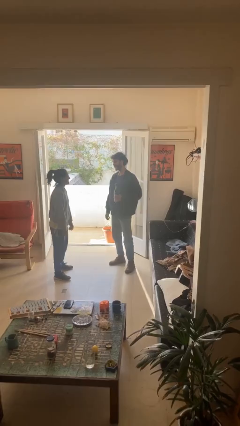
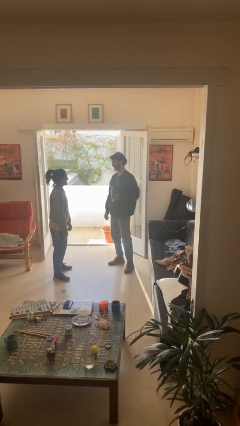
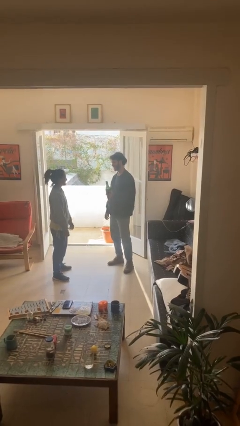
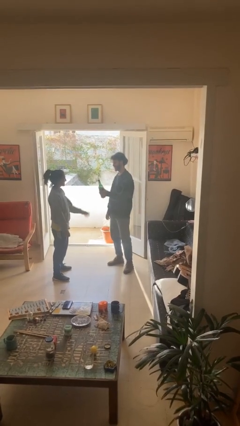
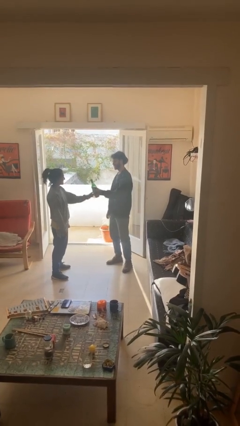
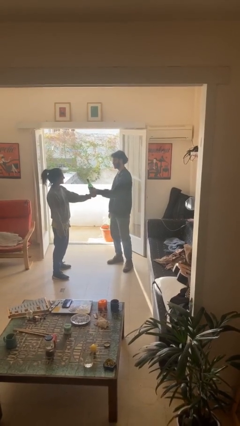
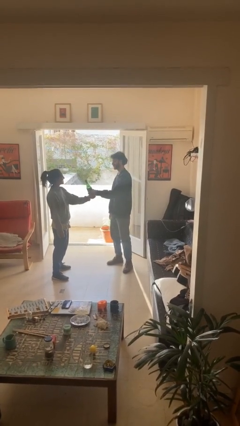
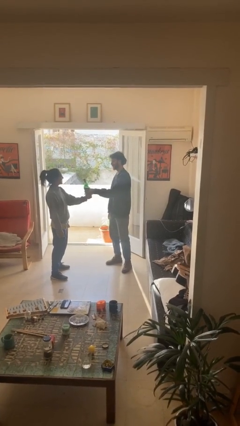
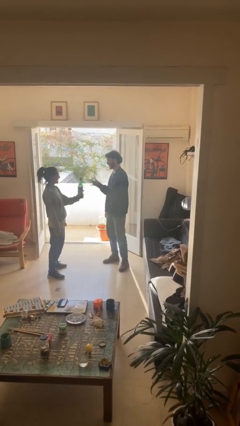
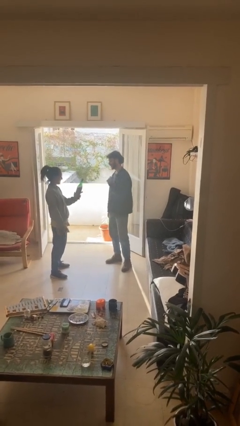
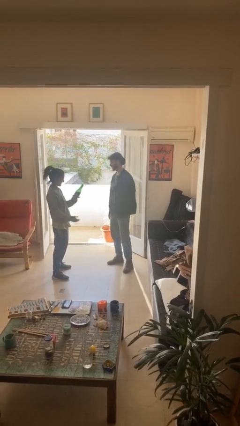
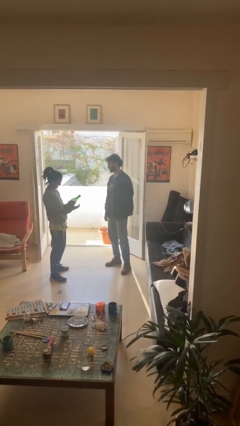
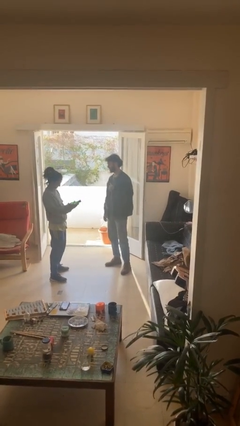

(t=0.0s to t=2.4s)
person transfers object to person

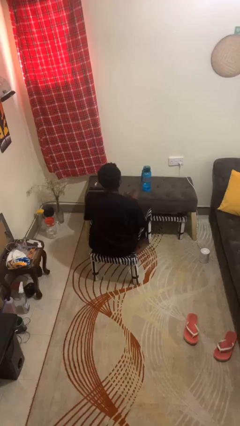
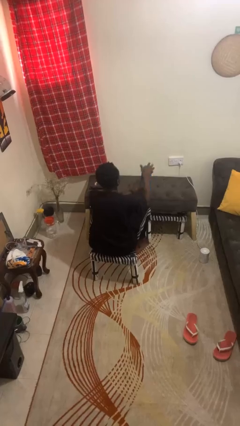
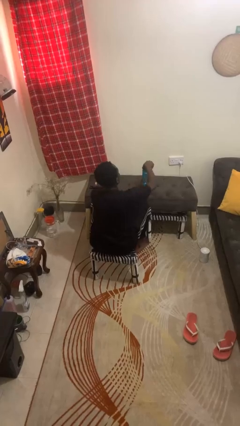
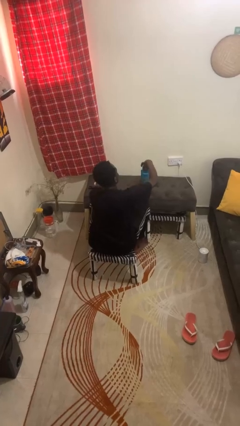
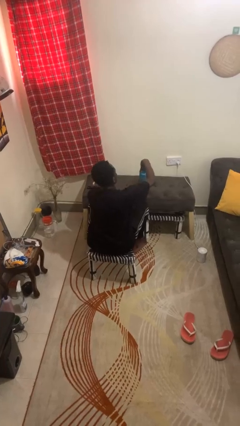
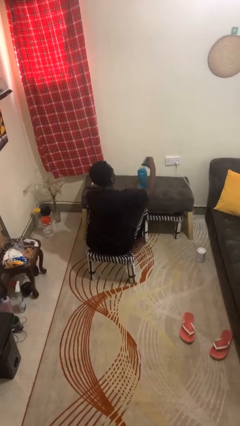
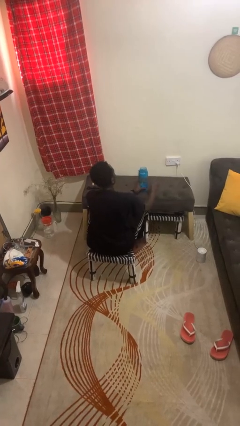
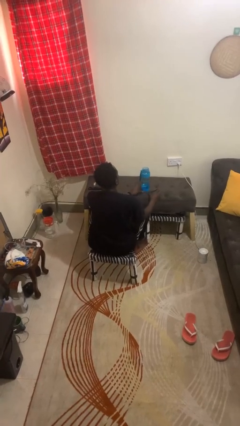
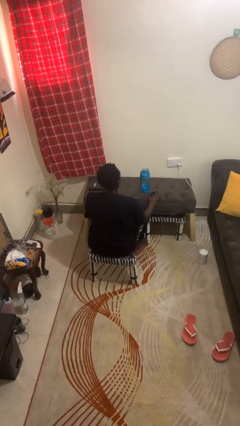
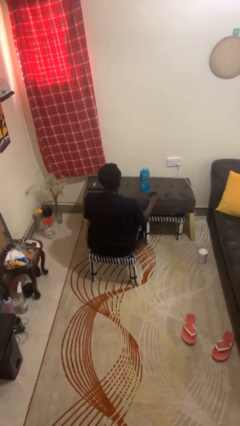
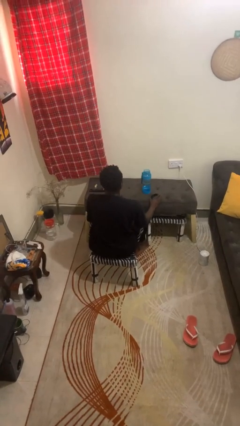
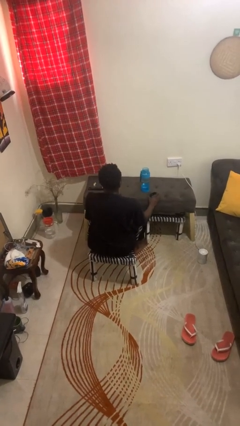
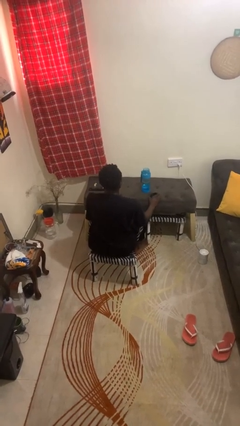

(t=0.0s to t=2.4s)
person opens jar

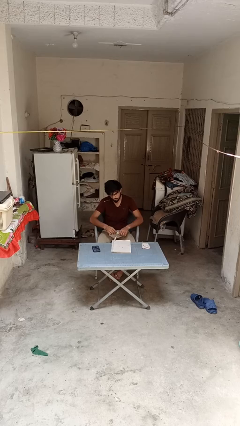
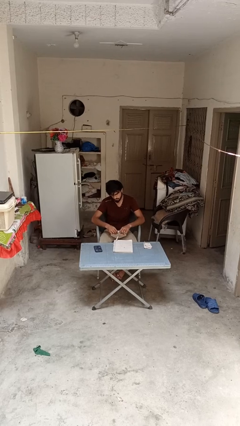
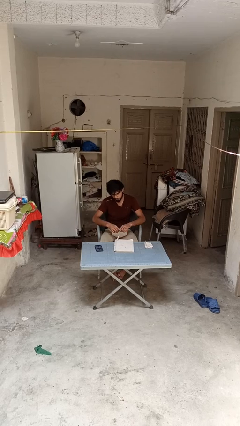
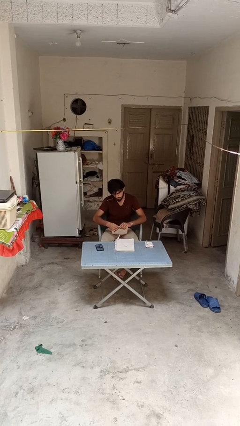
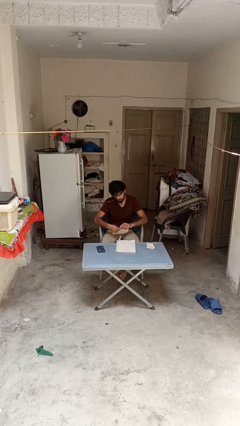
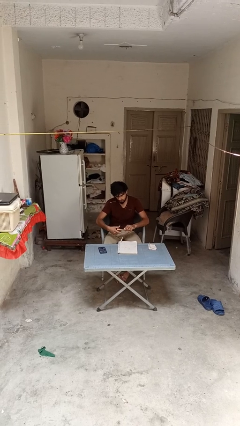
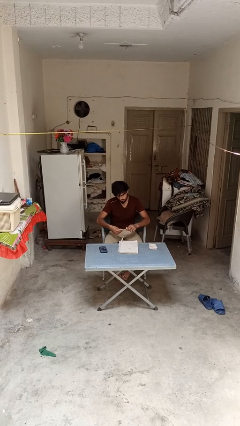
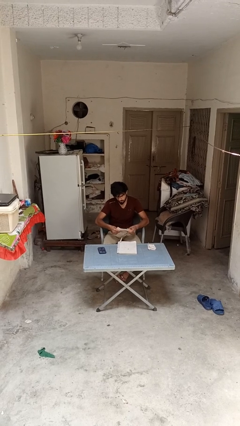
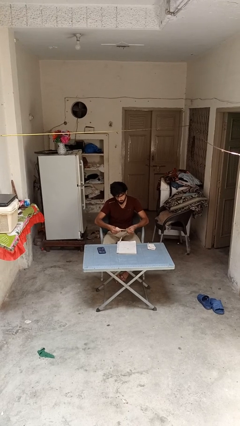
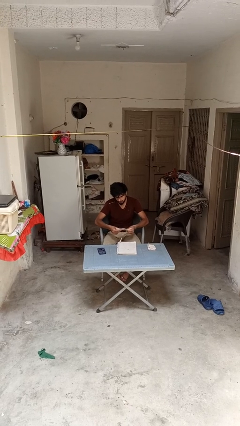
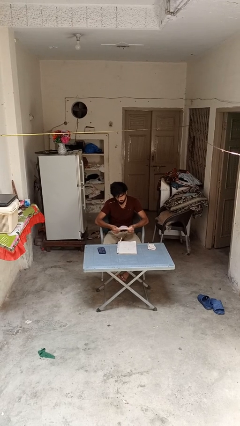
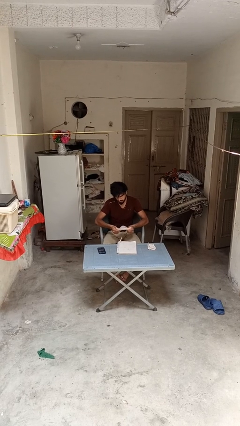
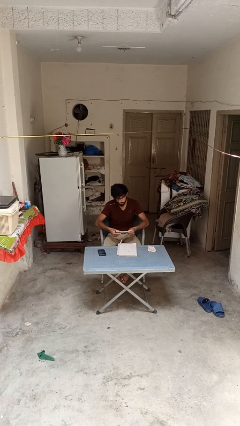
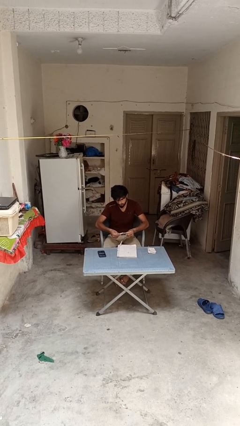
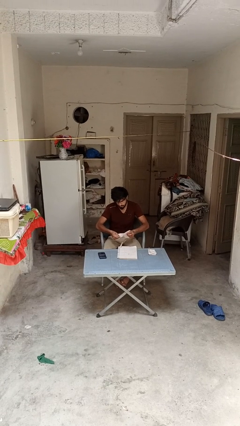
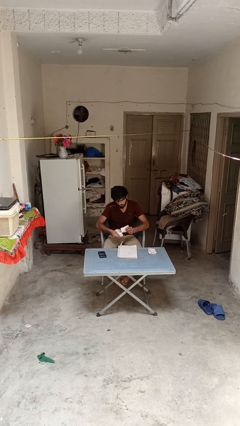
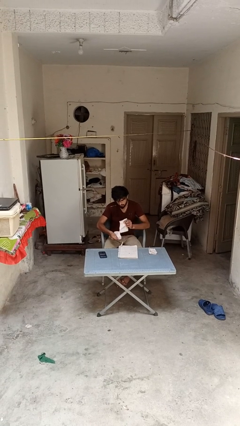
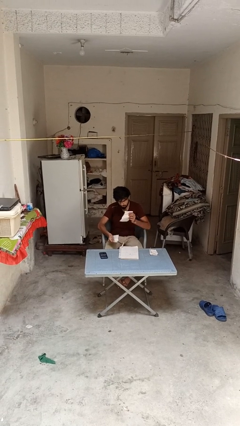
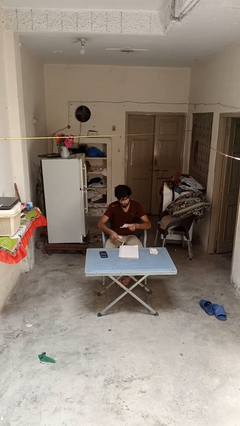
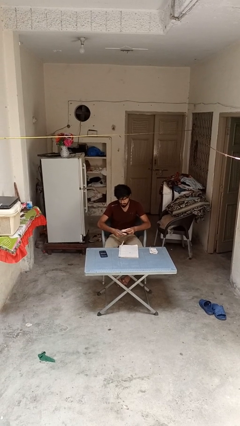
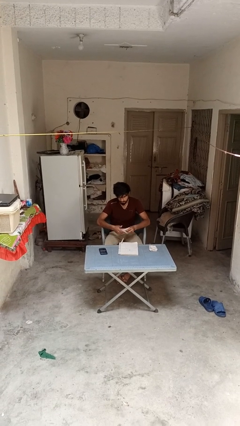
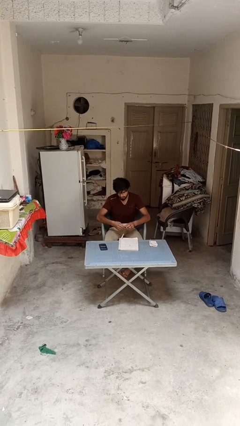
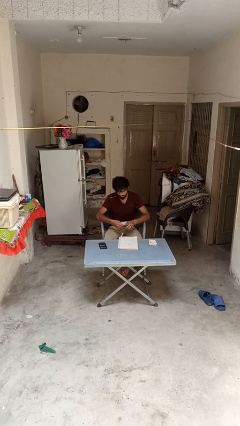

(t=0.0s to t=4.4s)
person tears paper

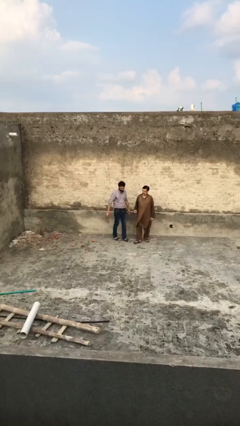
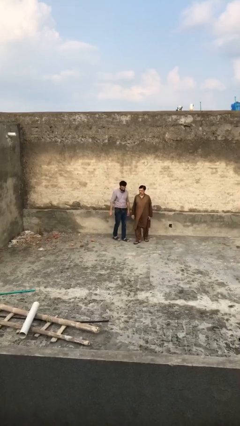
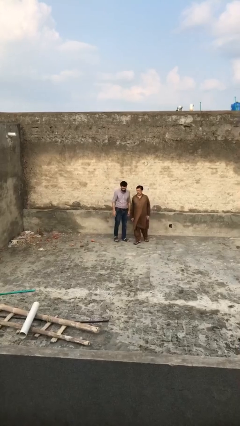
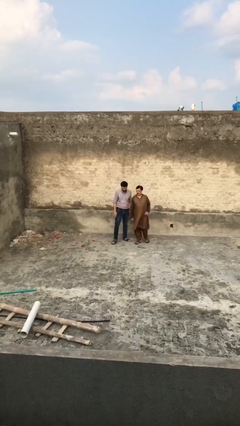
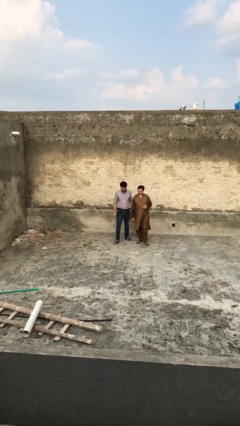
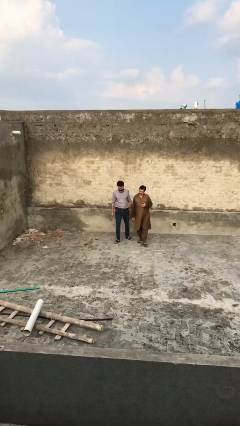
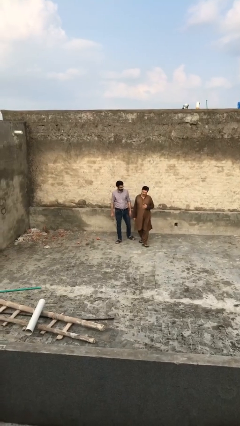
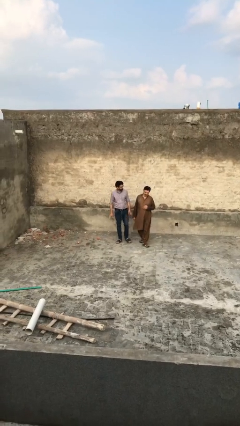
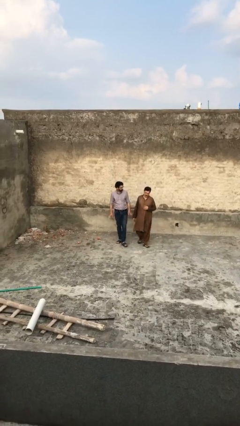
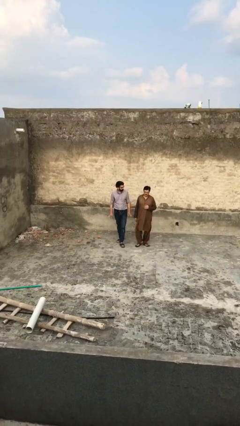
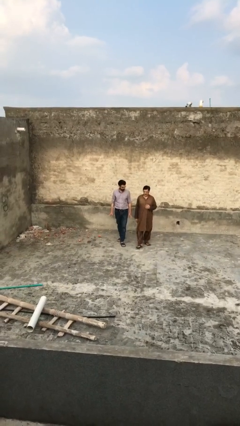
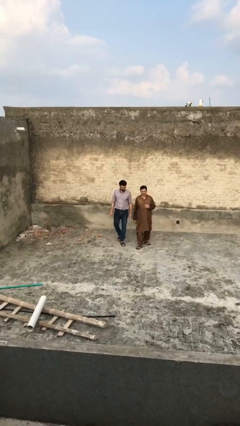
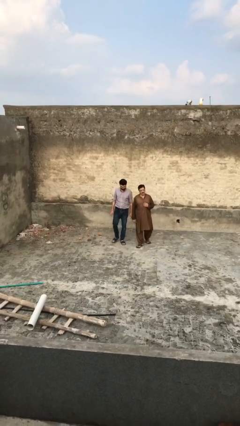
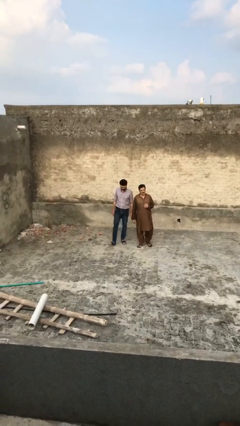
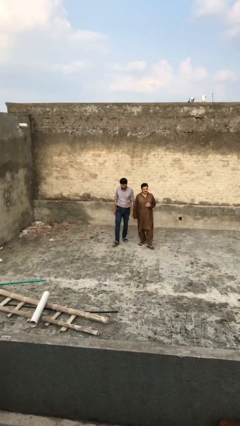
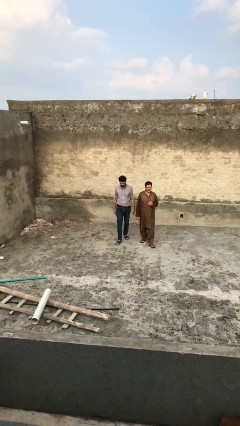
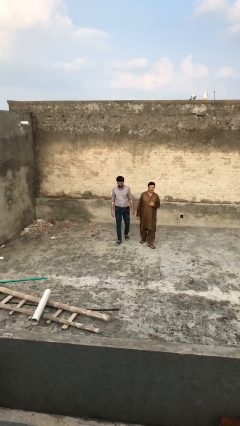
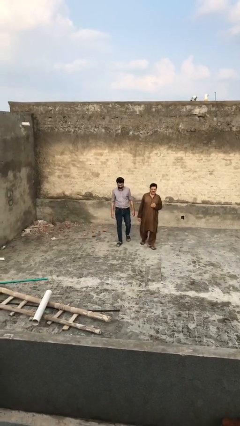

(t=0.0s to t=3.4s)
person talks to person

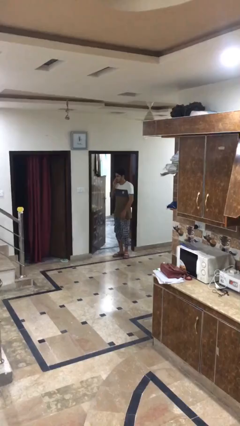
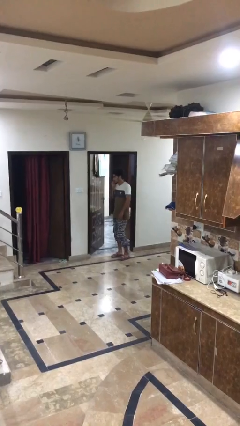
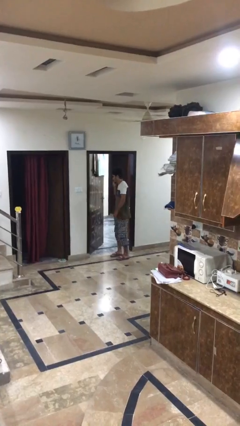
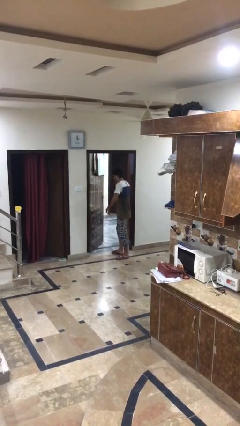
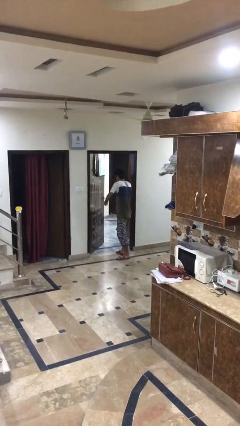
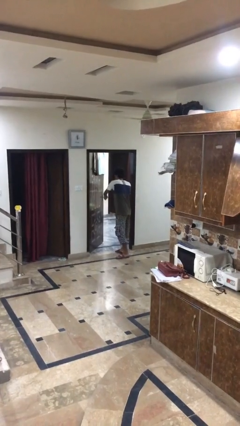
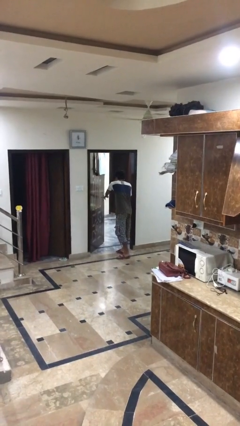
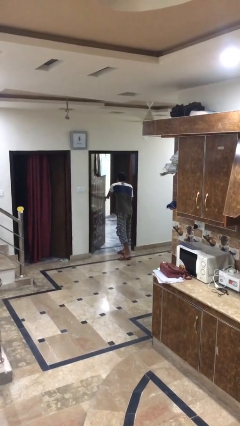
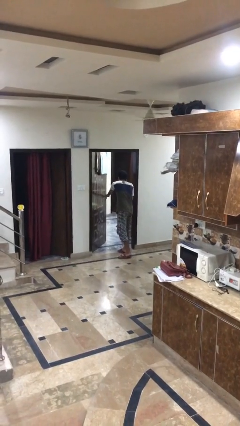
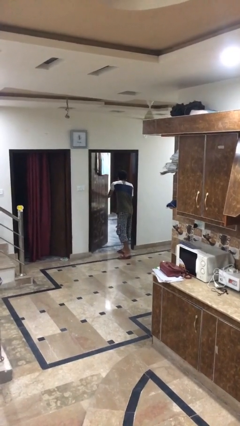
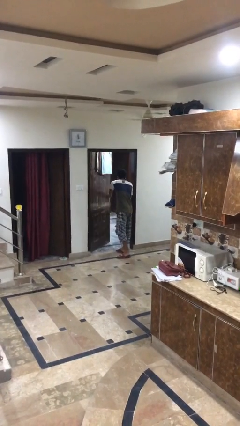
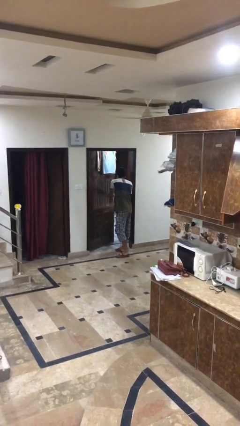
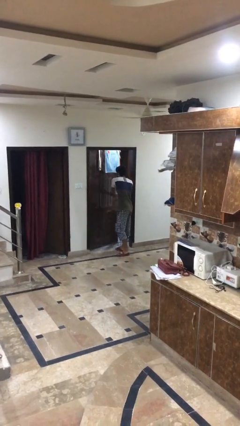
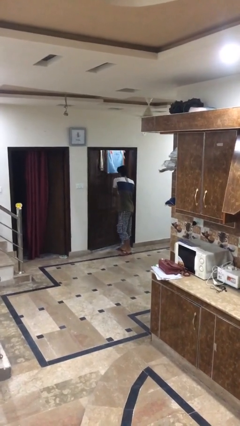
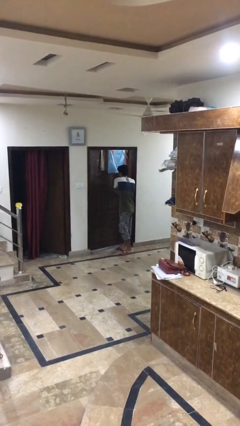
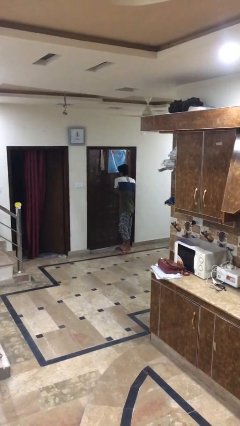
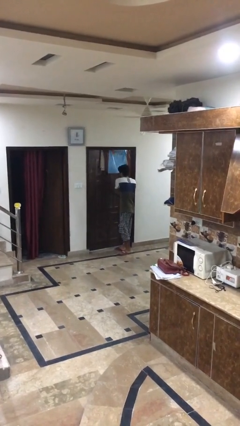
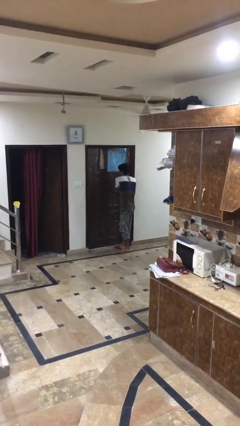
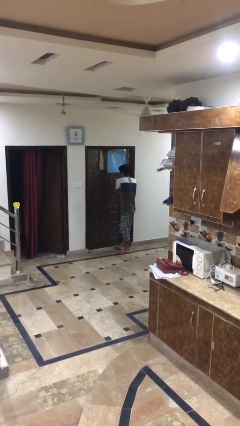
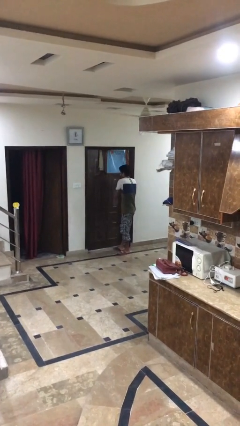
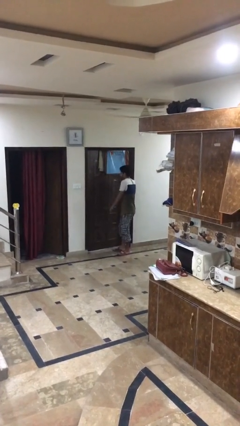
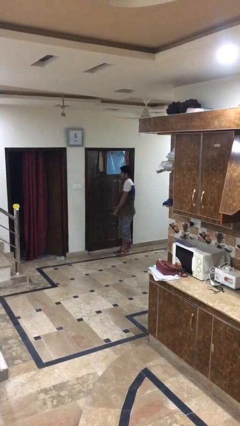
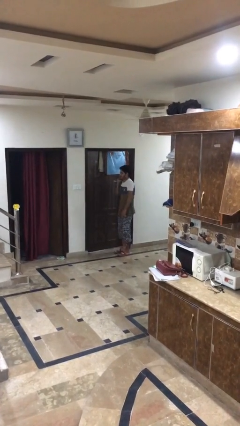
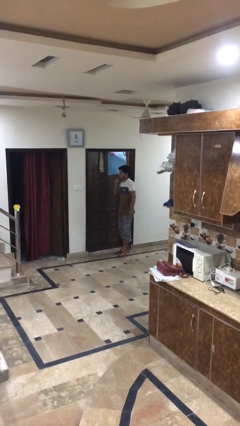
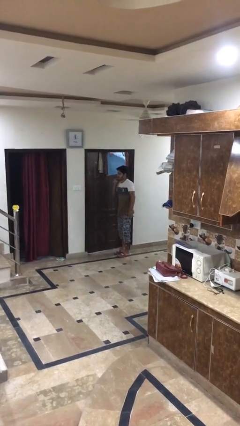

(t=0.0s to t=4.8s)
person closes facility door

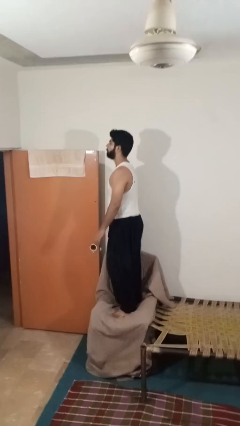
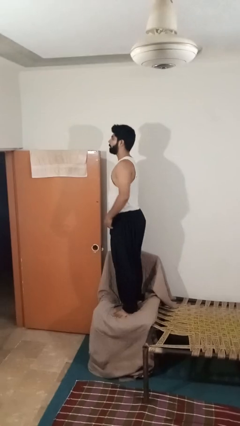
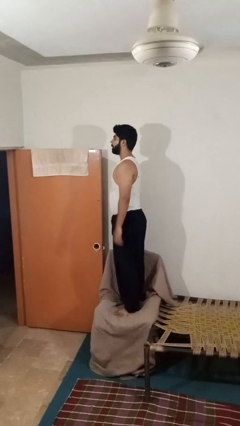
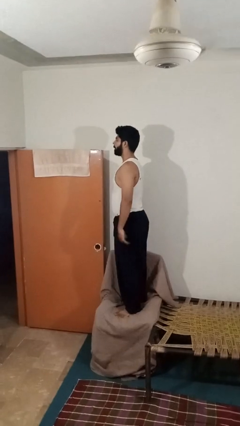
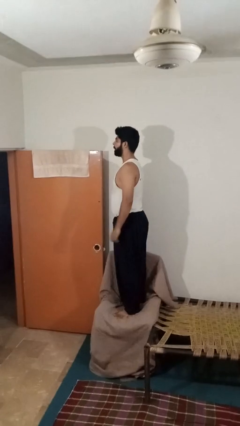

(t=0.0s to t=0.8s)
person jumps on couch
